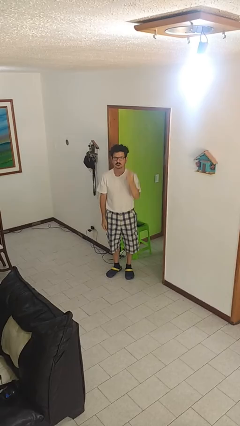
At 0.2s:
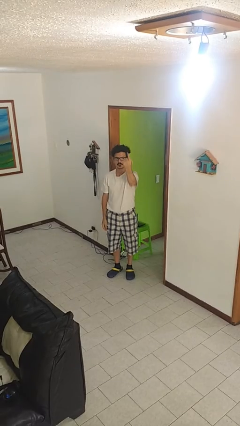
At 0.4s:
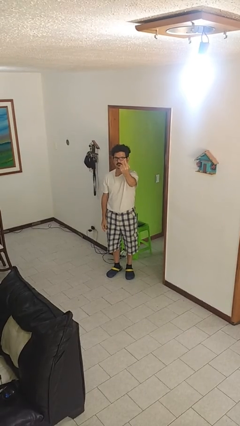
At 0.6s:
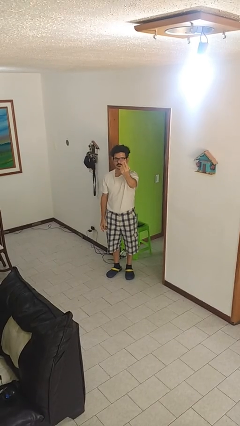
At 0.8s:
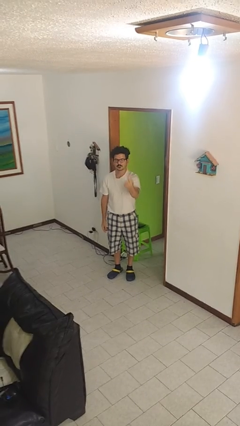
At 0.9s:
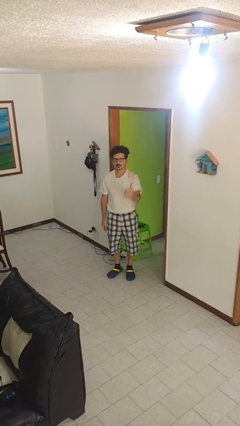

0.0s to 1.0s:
person gestures number one

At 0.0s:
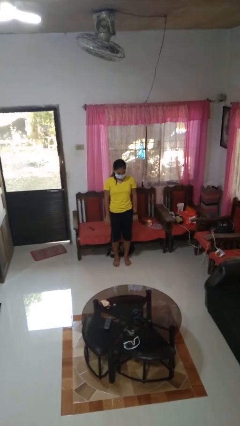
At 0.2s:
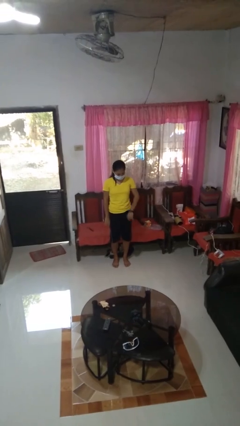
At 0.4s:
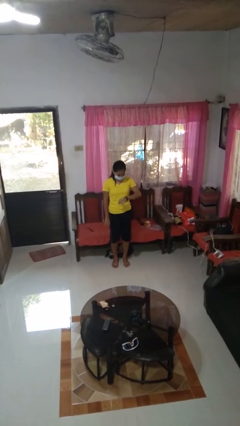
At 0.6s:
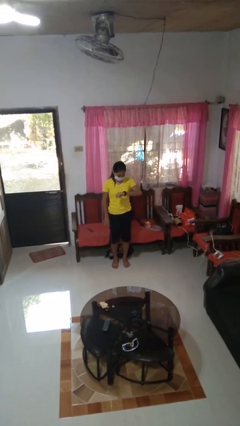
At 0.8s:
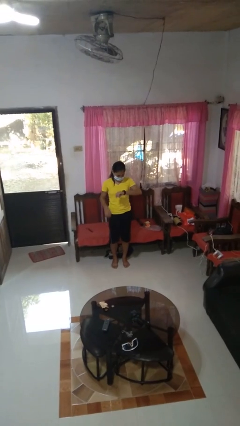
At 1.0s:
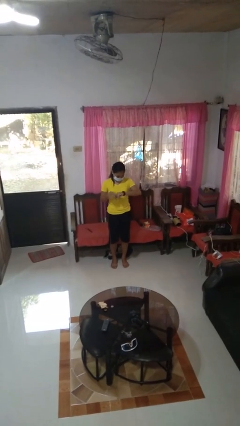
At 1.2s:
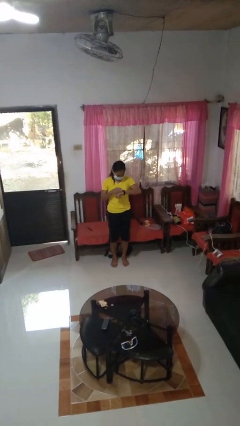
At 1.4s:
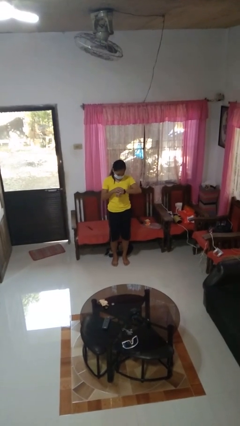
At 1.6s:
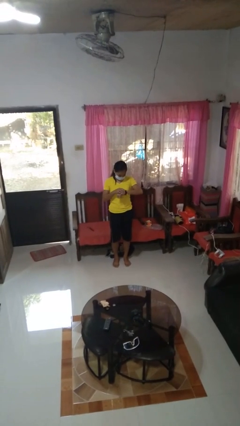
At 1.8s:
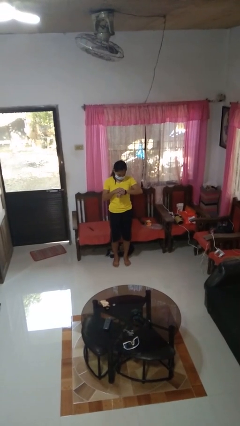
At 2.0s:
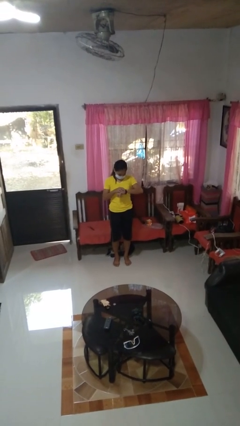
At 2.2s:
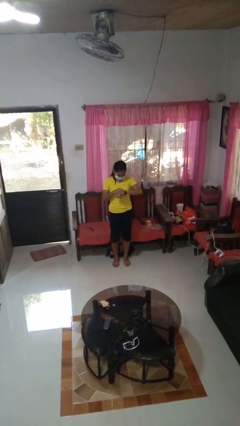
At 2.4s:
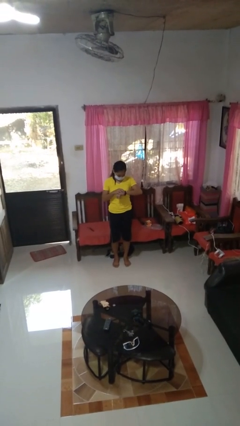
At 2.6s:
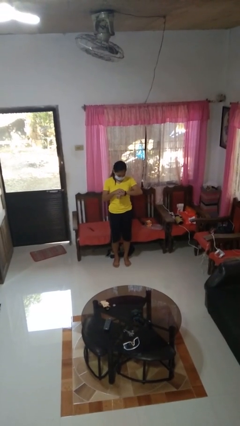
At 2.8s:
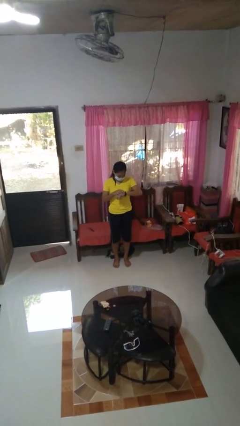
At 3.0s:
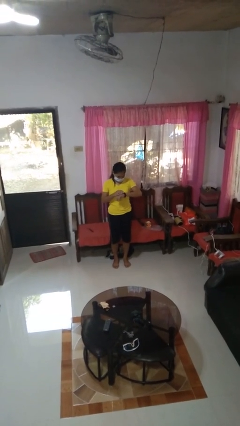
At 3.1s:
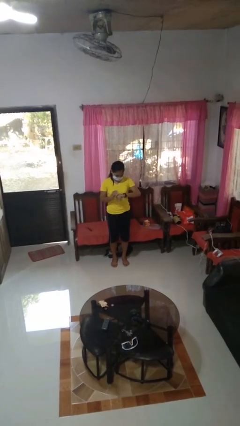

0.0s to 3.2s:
person looks at wristwatch

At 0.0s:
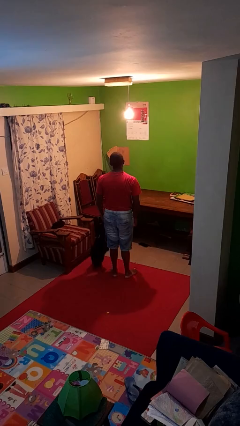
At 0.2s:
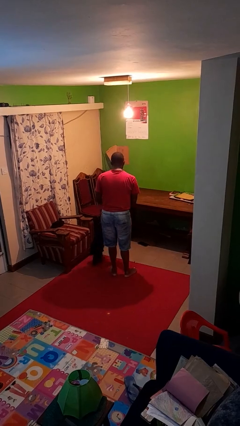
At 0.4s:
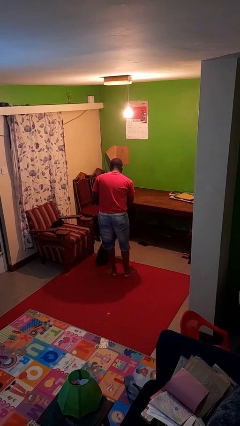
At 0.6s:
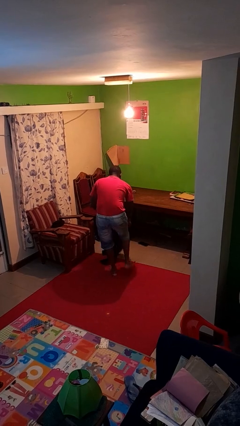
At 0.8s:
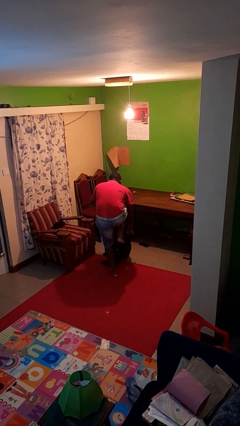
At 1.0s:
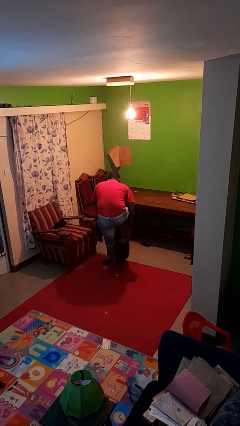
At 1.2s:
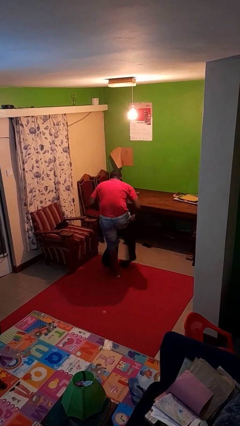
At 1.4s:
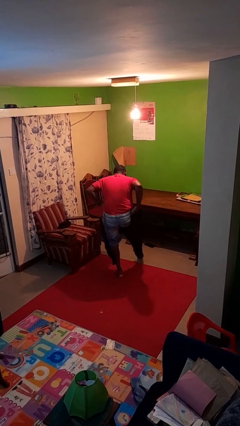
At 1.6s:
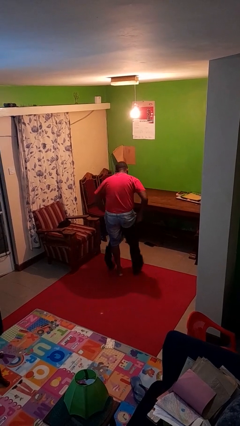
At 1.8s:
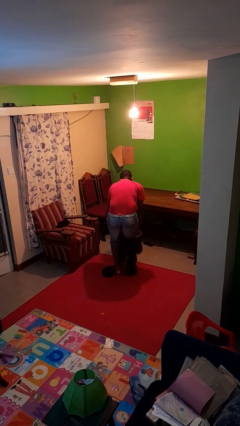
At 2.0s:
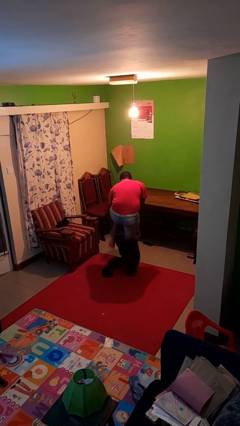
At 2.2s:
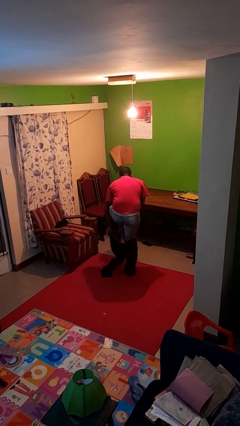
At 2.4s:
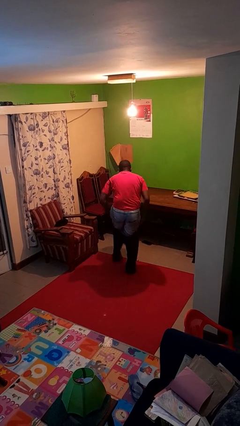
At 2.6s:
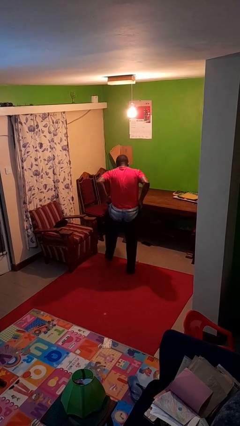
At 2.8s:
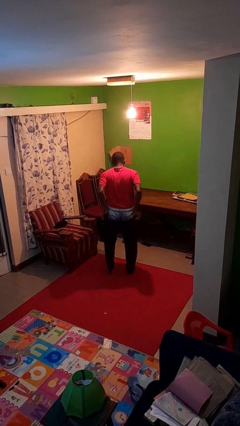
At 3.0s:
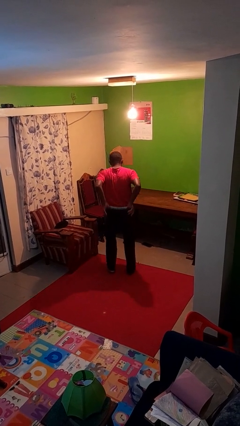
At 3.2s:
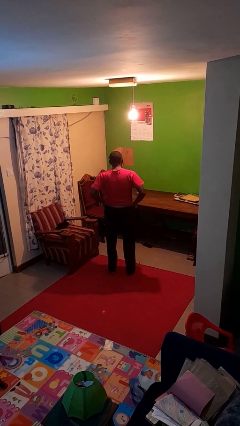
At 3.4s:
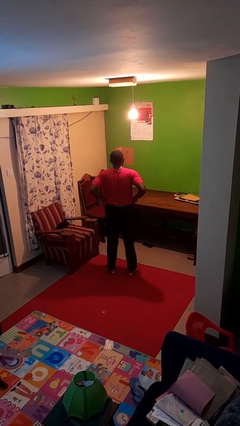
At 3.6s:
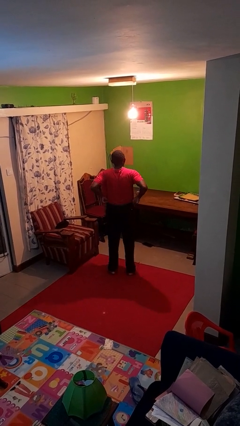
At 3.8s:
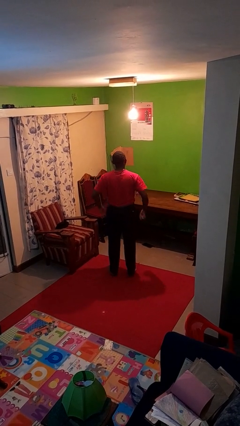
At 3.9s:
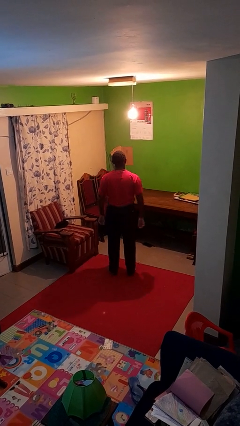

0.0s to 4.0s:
person puts on pants

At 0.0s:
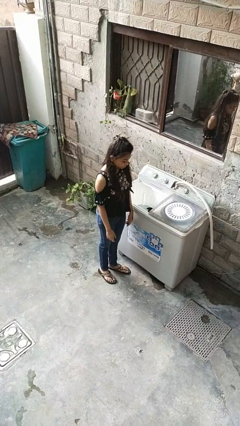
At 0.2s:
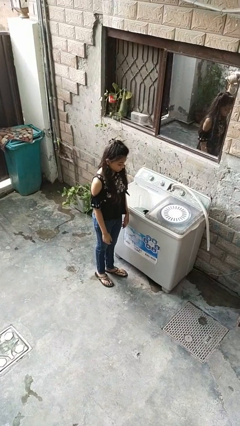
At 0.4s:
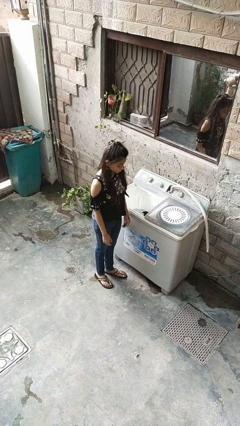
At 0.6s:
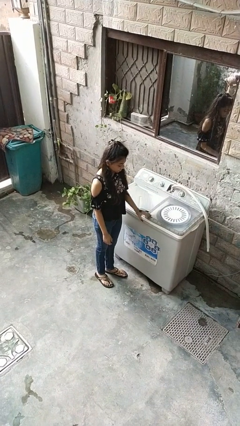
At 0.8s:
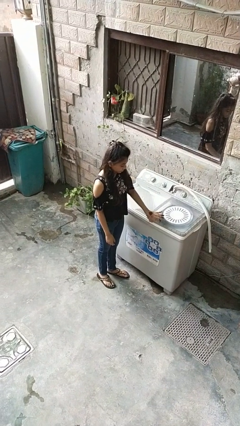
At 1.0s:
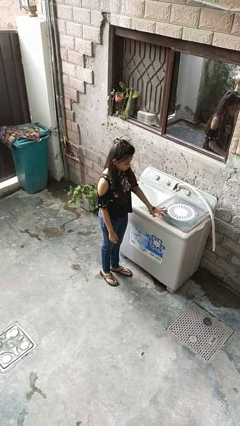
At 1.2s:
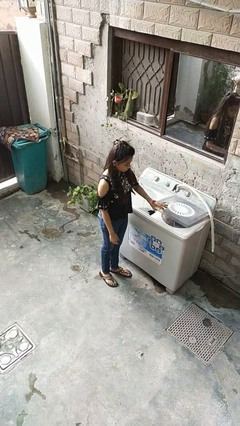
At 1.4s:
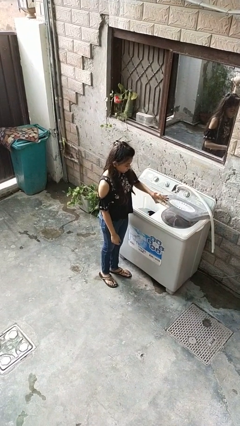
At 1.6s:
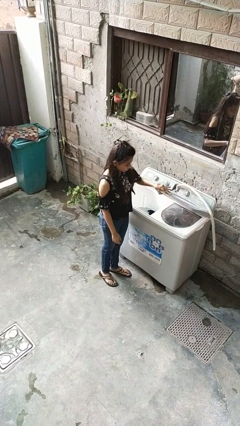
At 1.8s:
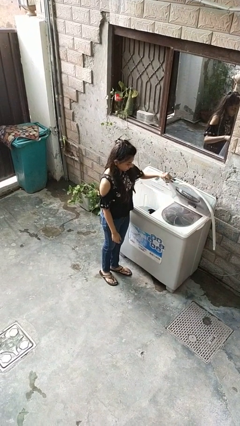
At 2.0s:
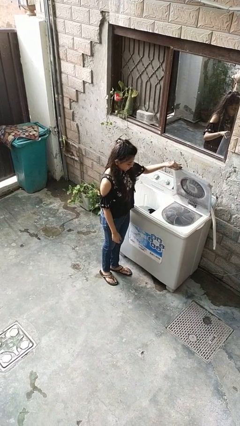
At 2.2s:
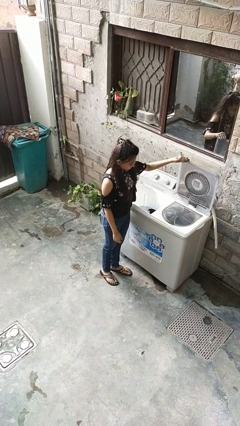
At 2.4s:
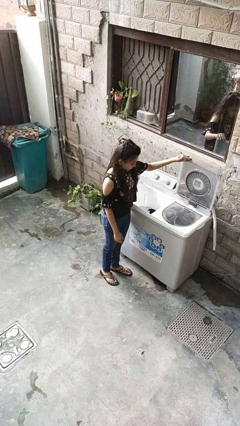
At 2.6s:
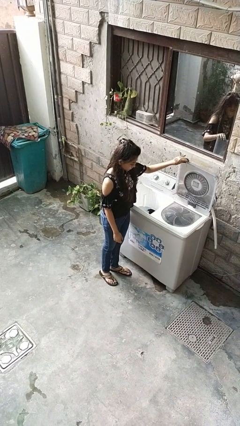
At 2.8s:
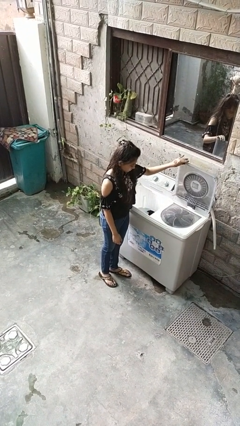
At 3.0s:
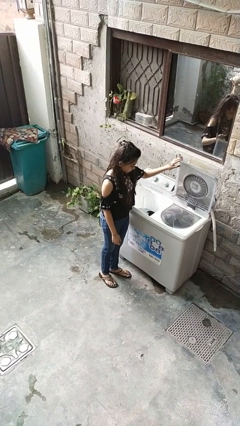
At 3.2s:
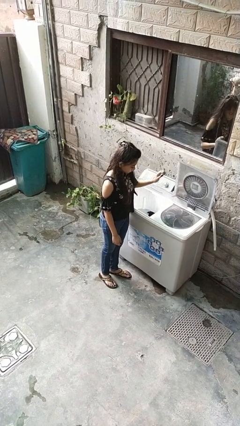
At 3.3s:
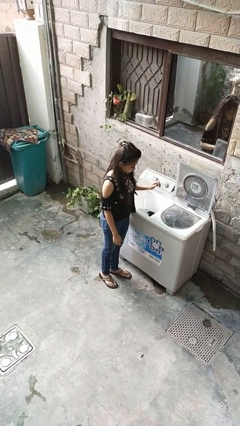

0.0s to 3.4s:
person opens clothes washer

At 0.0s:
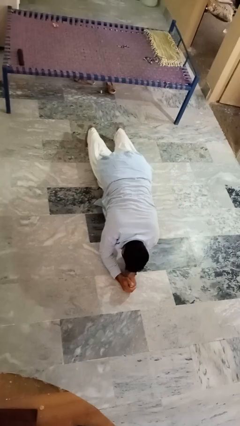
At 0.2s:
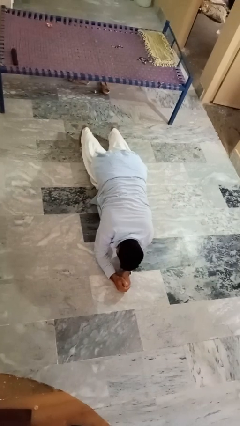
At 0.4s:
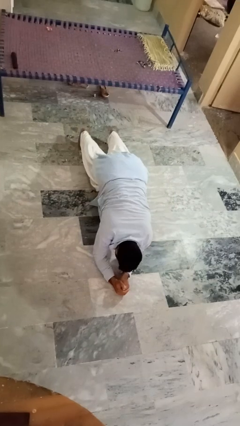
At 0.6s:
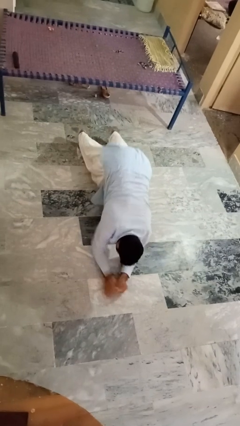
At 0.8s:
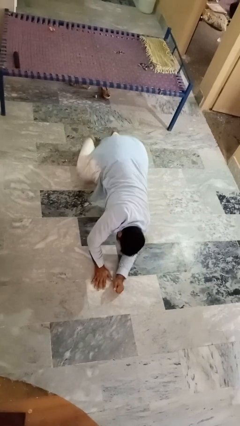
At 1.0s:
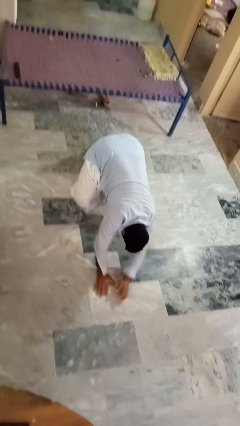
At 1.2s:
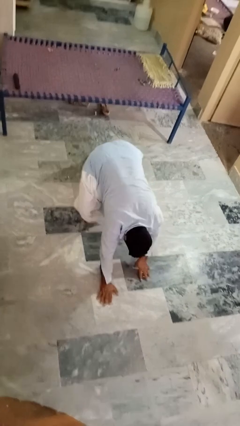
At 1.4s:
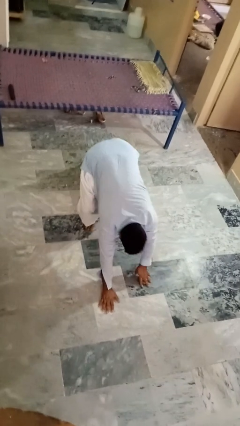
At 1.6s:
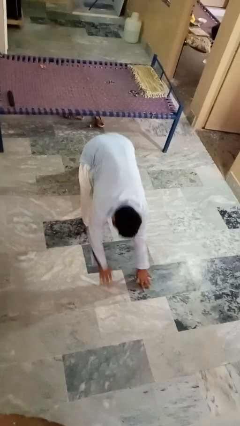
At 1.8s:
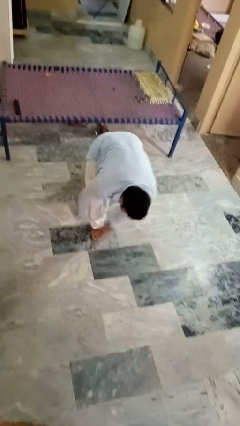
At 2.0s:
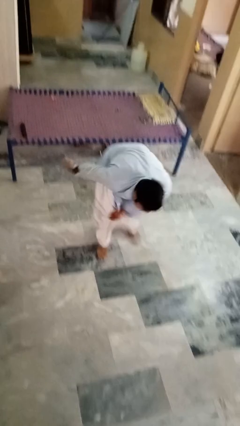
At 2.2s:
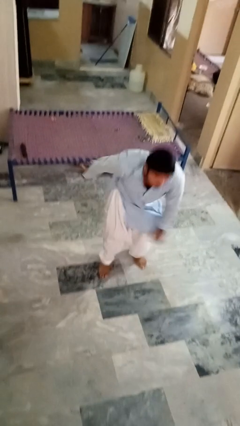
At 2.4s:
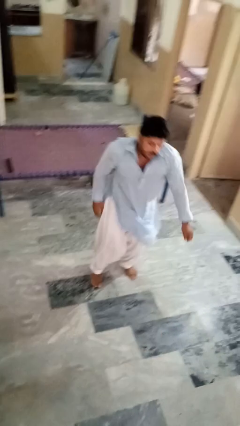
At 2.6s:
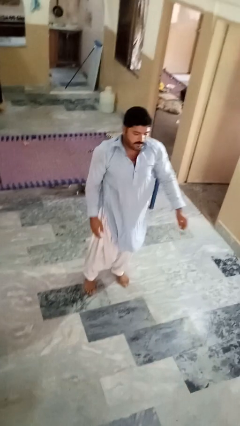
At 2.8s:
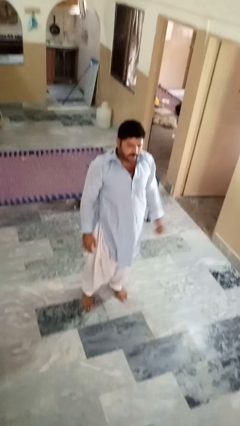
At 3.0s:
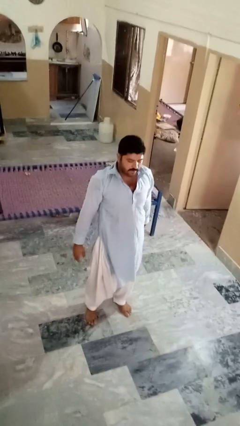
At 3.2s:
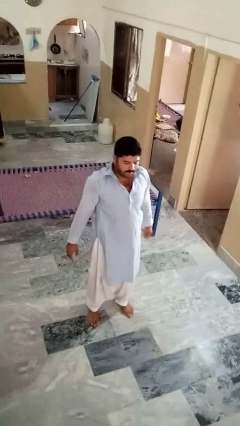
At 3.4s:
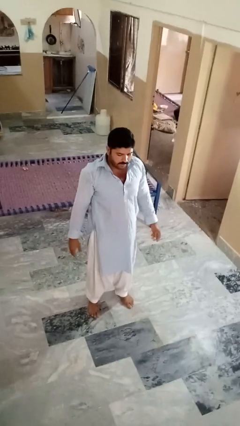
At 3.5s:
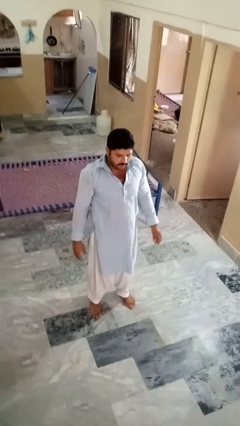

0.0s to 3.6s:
person stands up from floor

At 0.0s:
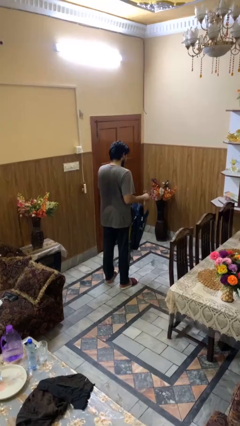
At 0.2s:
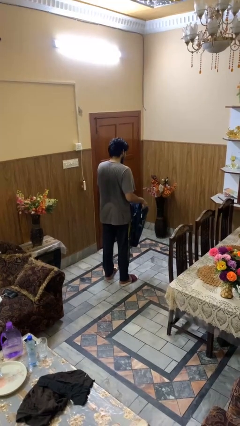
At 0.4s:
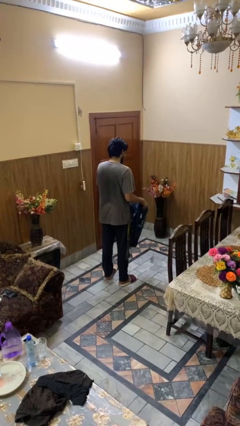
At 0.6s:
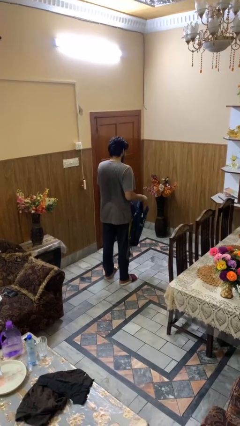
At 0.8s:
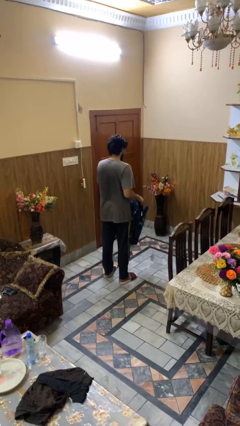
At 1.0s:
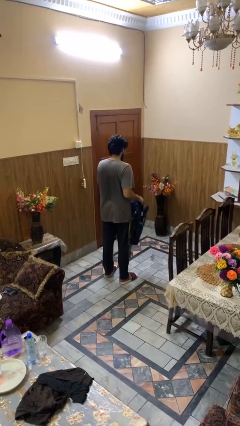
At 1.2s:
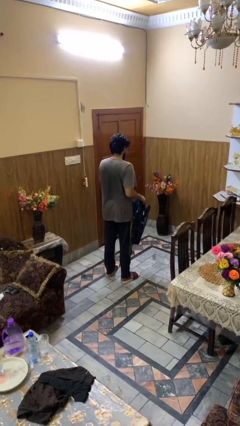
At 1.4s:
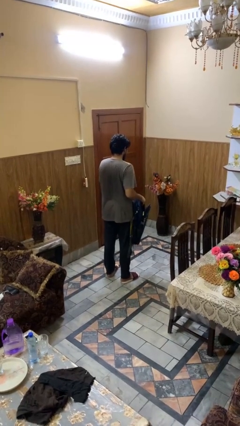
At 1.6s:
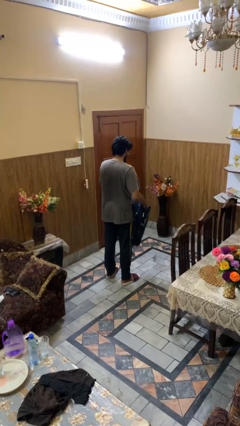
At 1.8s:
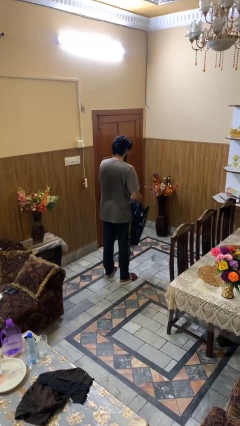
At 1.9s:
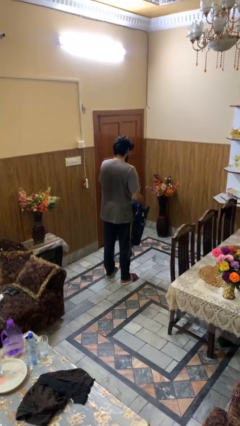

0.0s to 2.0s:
person puts object into backpack

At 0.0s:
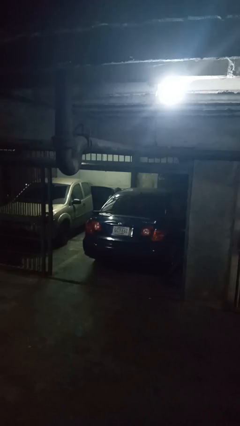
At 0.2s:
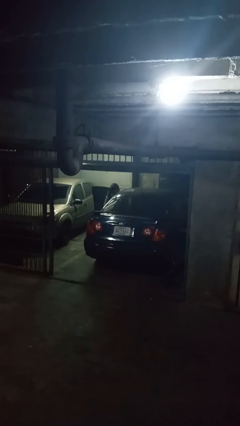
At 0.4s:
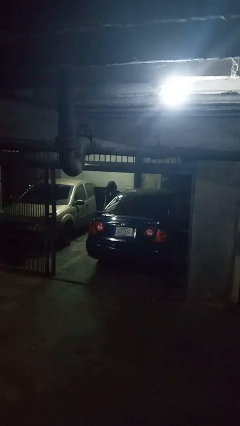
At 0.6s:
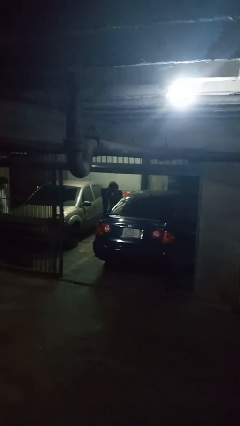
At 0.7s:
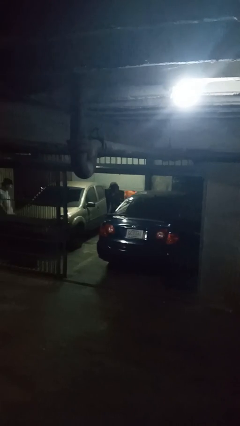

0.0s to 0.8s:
person unloads car
